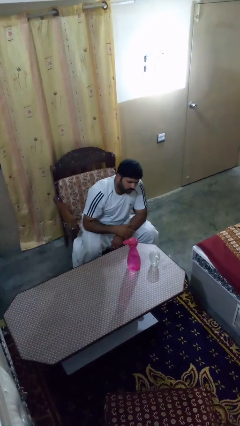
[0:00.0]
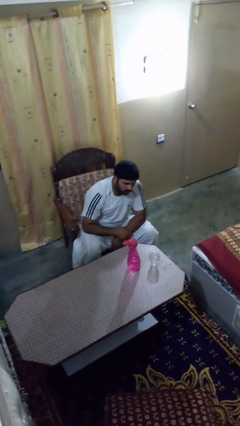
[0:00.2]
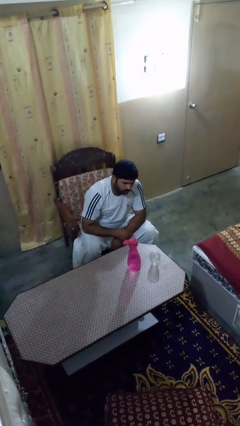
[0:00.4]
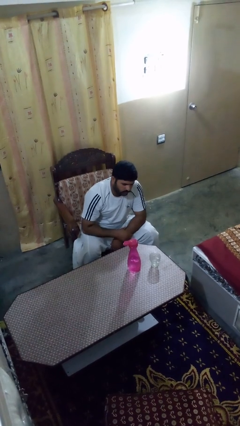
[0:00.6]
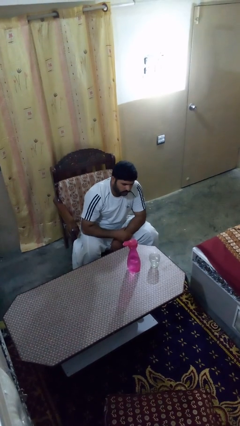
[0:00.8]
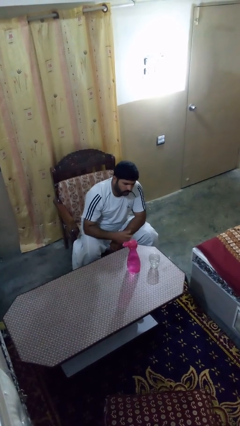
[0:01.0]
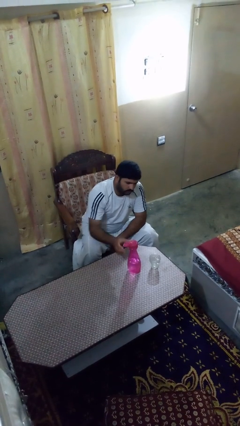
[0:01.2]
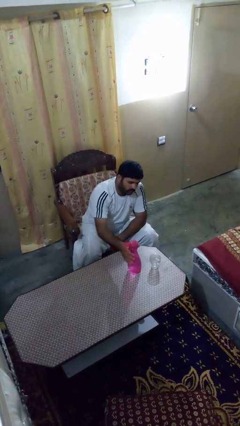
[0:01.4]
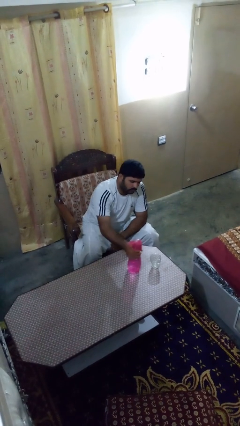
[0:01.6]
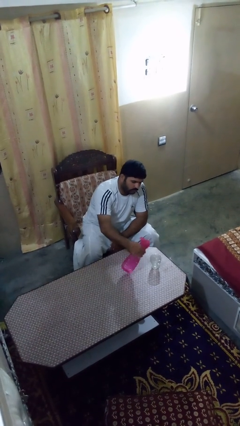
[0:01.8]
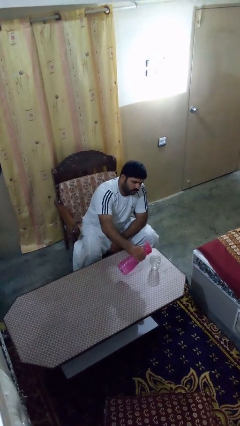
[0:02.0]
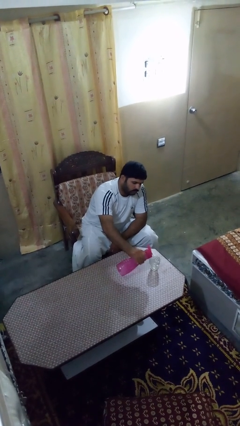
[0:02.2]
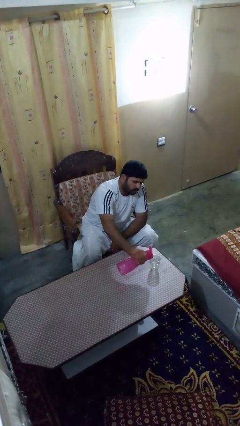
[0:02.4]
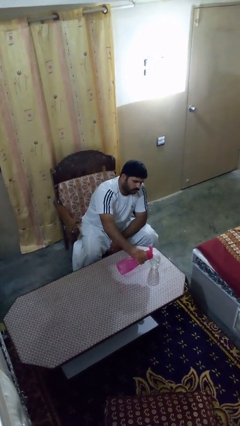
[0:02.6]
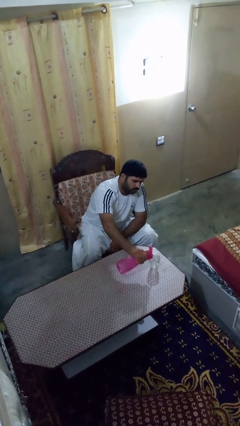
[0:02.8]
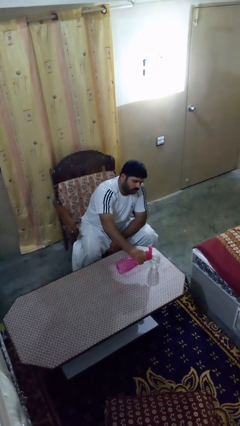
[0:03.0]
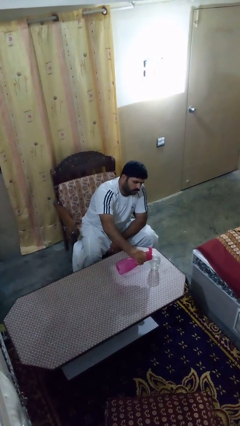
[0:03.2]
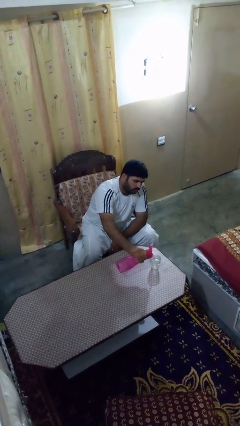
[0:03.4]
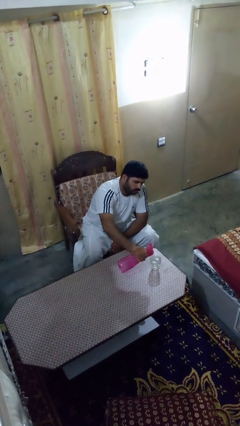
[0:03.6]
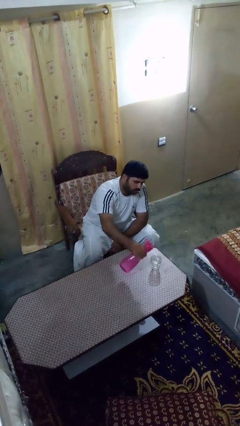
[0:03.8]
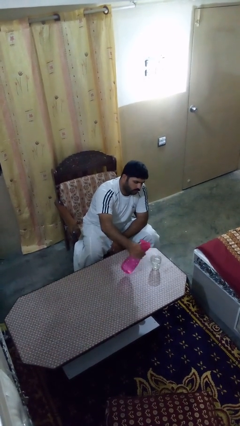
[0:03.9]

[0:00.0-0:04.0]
person pours liquid into cup

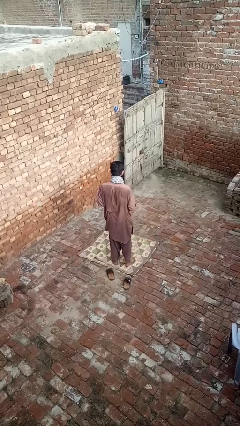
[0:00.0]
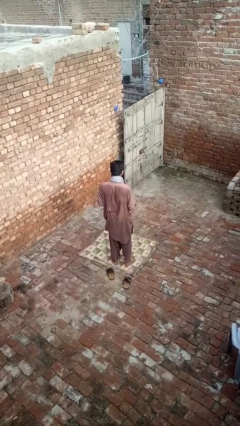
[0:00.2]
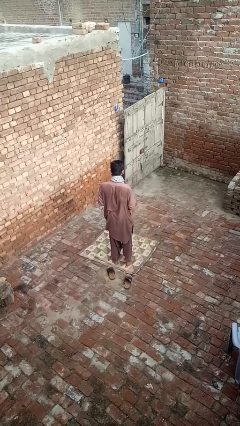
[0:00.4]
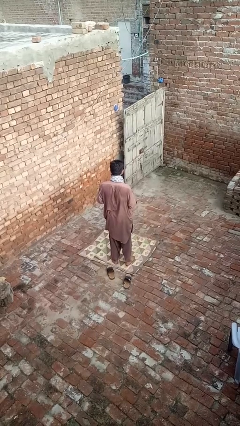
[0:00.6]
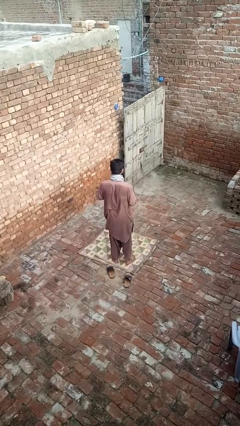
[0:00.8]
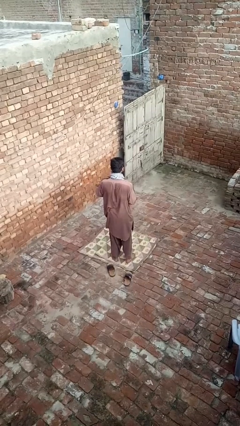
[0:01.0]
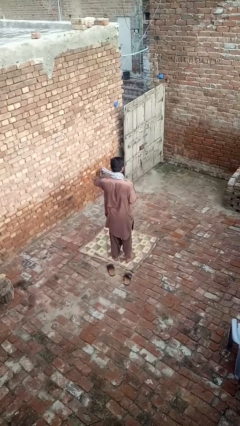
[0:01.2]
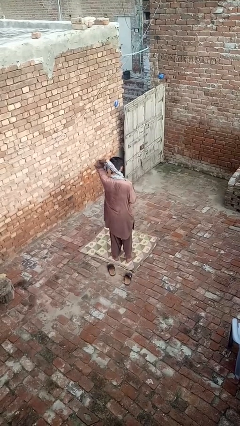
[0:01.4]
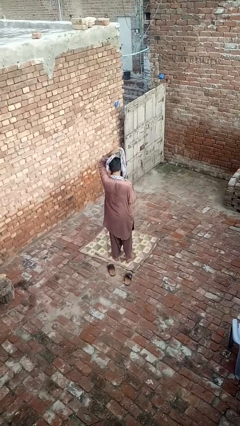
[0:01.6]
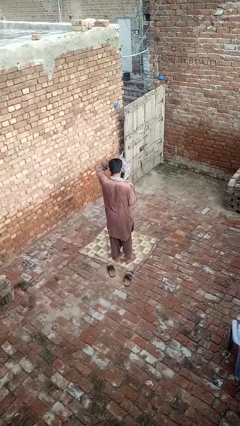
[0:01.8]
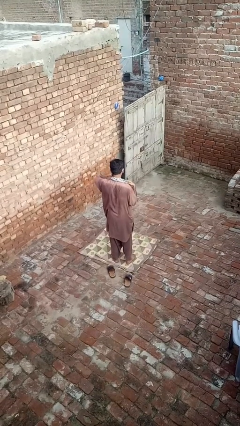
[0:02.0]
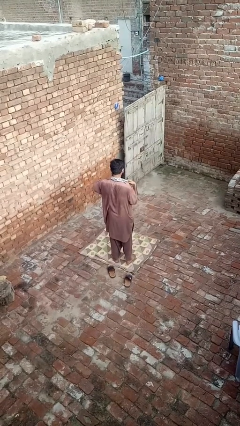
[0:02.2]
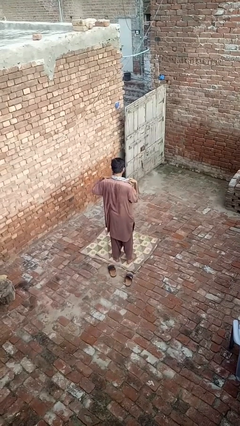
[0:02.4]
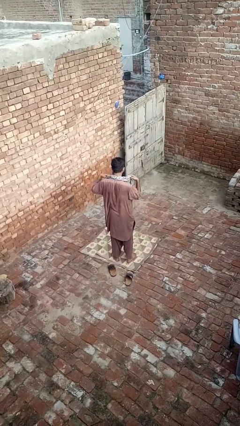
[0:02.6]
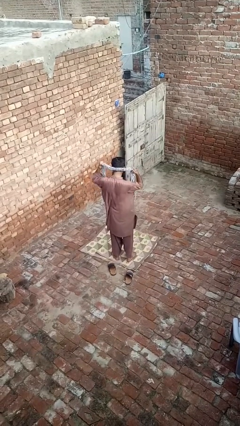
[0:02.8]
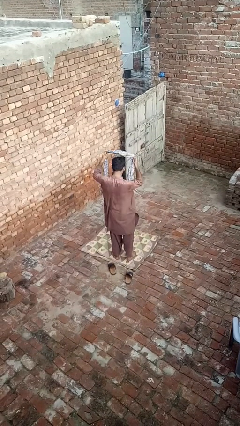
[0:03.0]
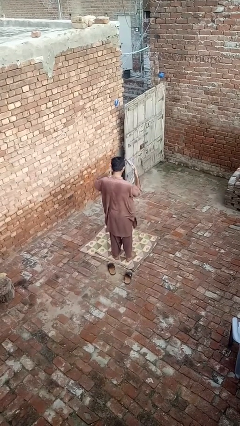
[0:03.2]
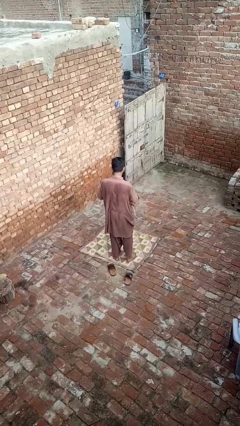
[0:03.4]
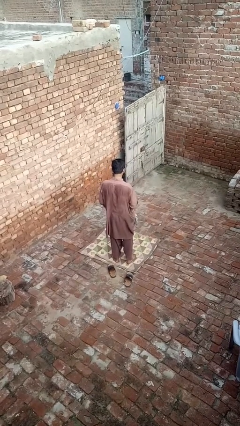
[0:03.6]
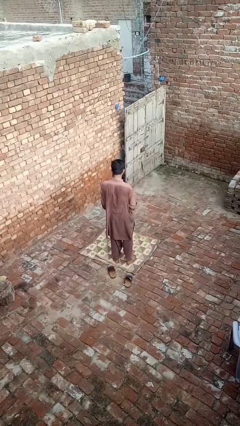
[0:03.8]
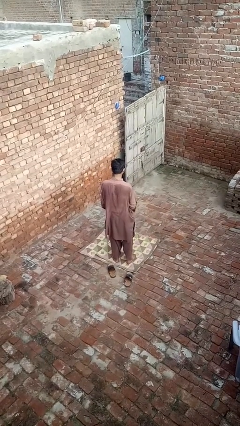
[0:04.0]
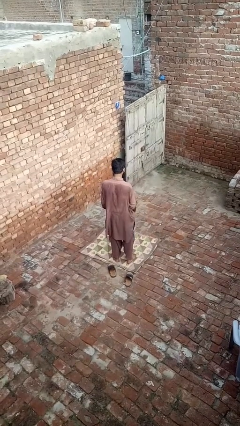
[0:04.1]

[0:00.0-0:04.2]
person takes off scarf

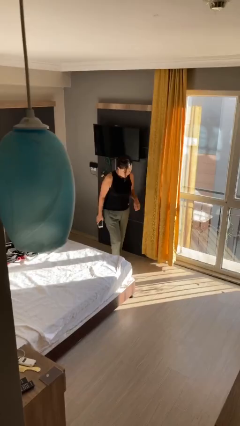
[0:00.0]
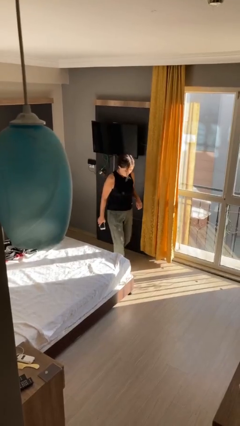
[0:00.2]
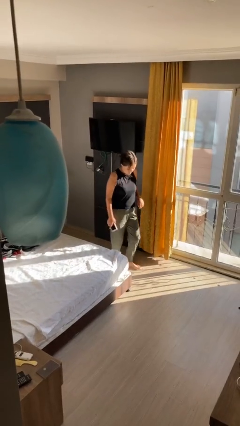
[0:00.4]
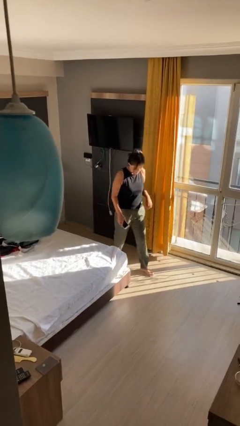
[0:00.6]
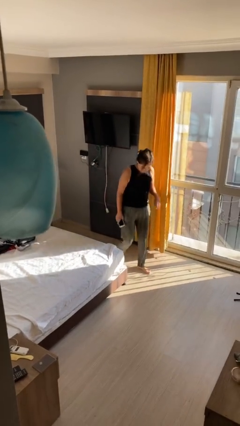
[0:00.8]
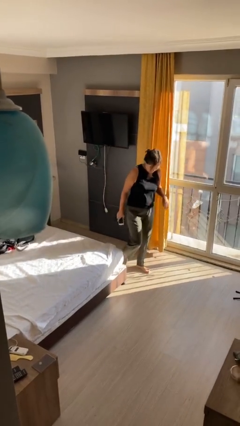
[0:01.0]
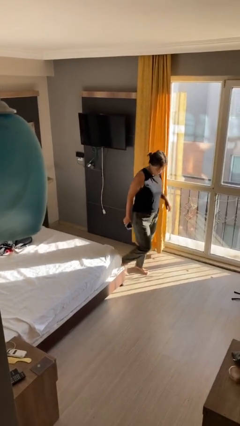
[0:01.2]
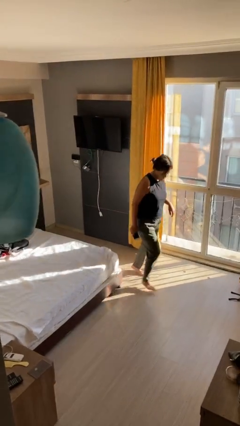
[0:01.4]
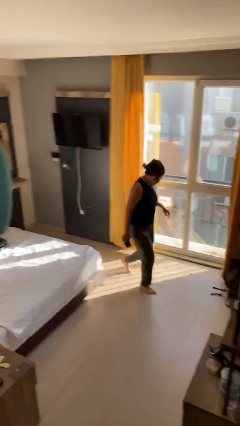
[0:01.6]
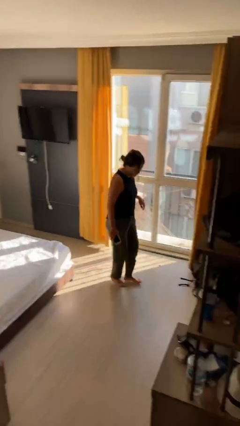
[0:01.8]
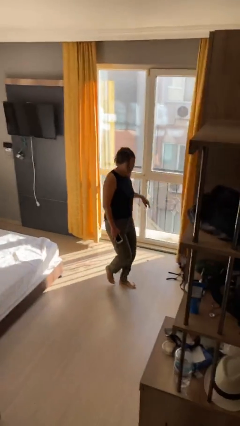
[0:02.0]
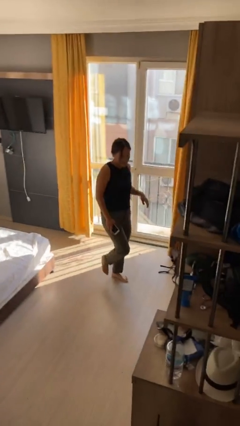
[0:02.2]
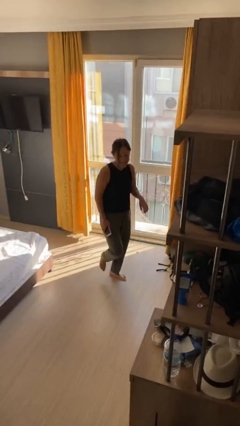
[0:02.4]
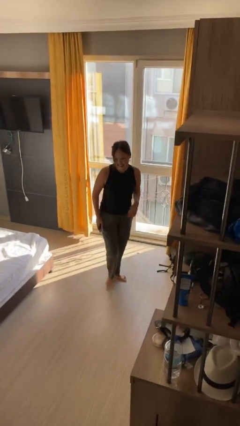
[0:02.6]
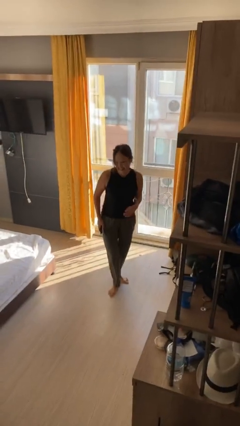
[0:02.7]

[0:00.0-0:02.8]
person stubs toe

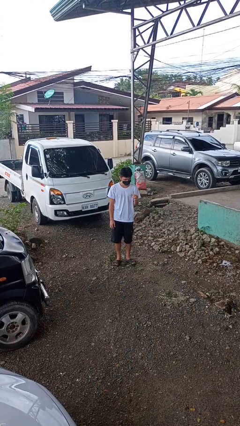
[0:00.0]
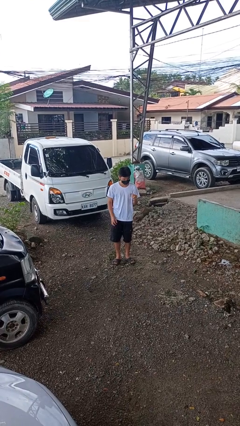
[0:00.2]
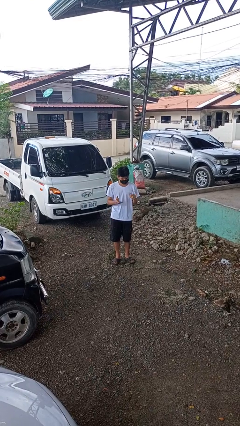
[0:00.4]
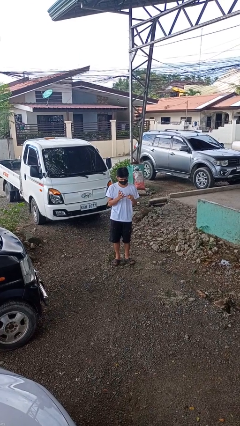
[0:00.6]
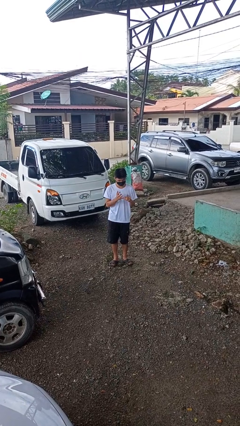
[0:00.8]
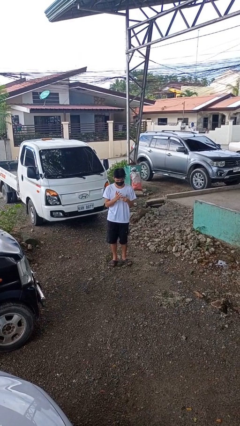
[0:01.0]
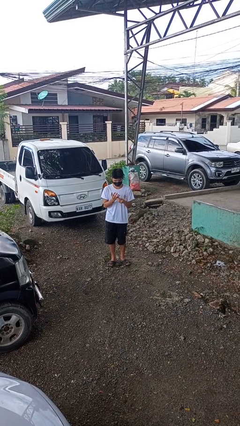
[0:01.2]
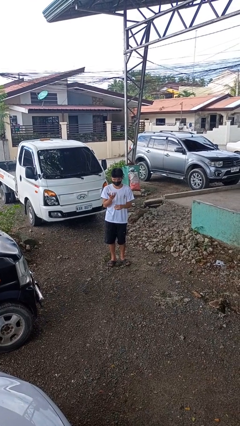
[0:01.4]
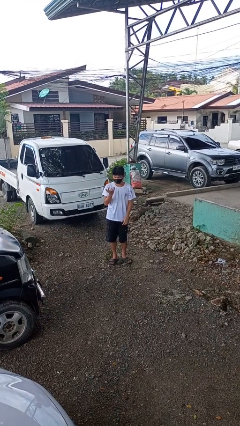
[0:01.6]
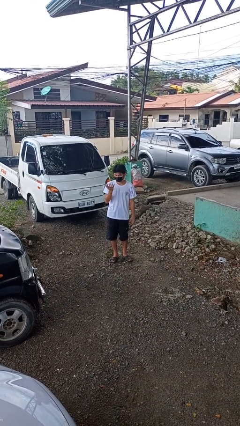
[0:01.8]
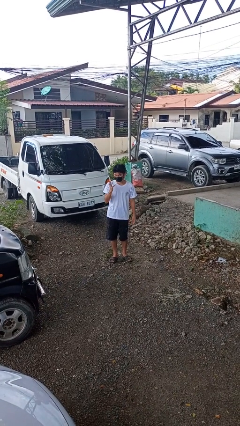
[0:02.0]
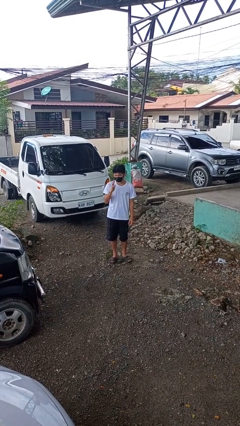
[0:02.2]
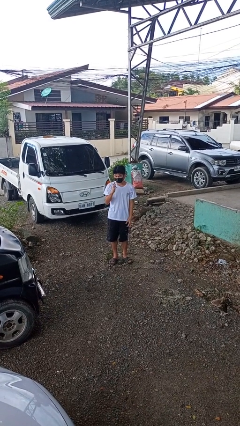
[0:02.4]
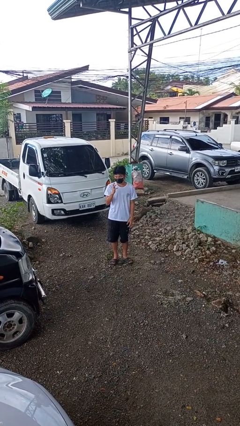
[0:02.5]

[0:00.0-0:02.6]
person puts on ring

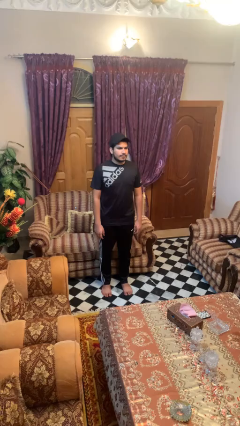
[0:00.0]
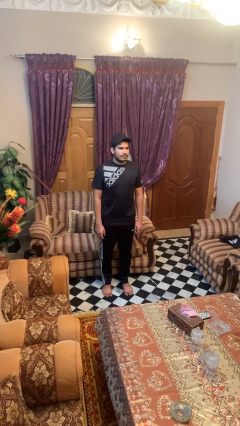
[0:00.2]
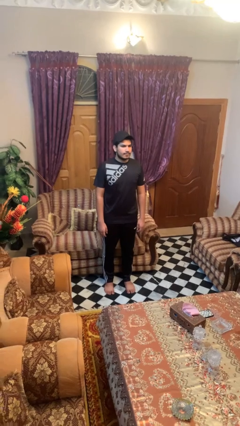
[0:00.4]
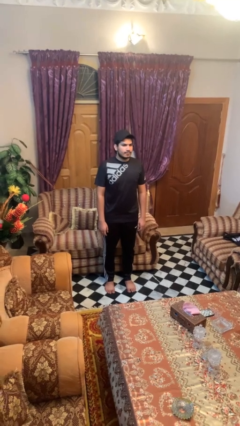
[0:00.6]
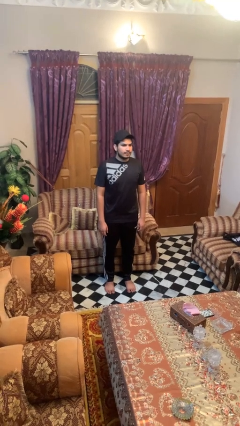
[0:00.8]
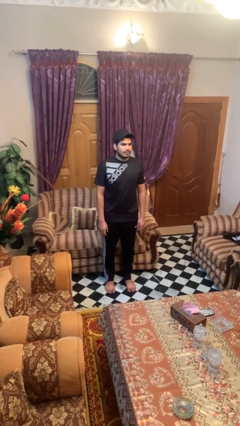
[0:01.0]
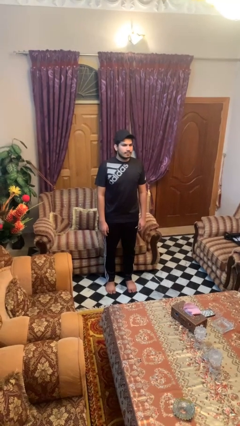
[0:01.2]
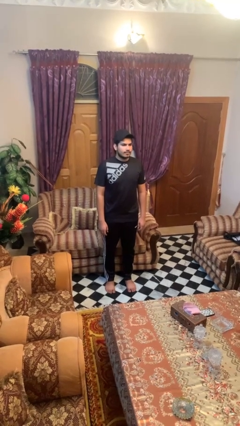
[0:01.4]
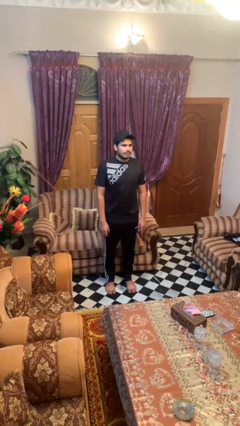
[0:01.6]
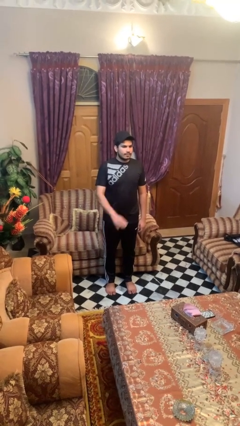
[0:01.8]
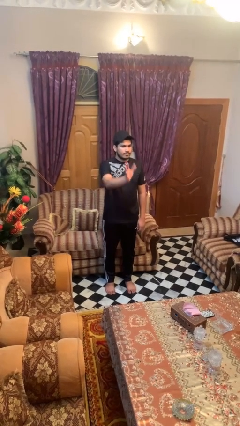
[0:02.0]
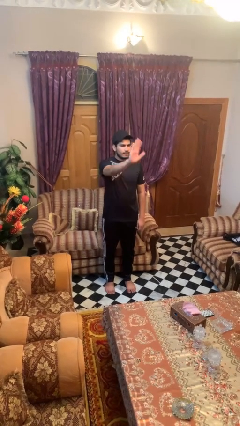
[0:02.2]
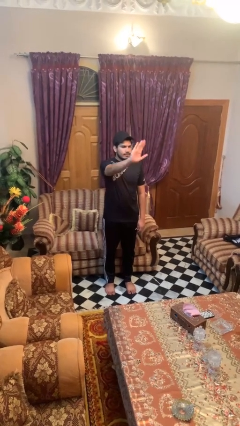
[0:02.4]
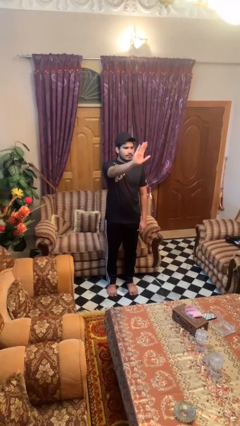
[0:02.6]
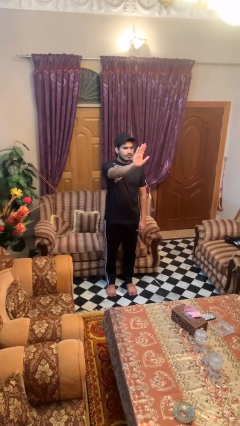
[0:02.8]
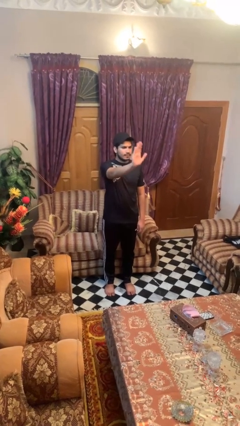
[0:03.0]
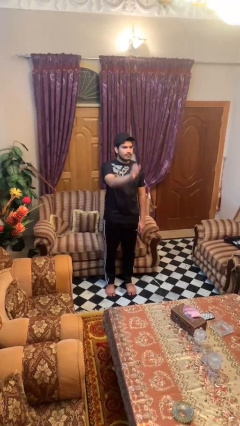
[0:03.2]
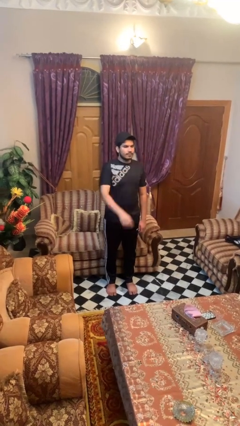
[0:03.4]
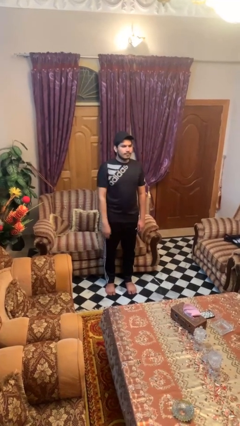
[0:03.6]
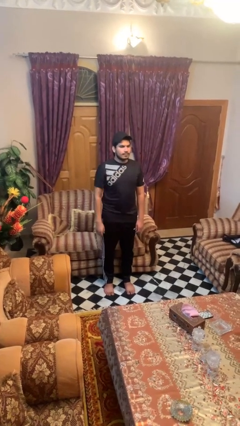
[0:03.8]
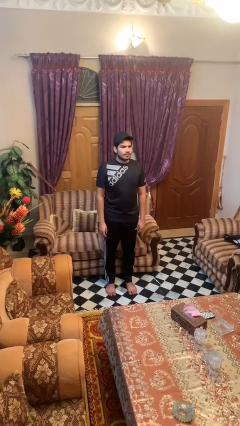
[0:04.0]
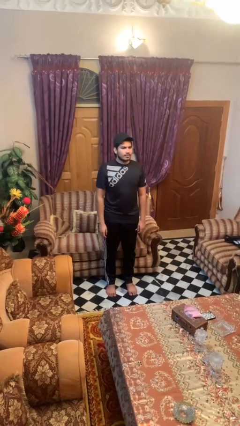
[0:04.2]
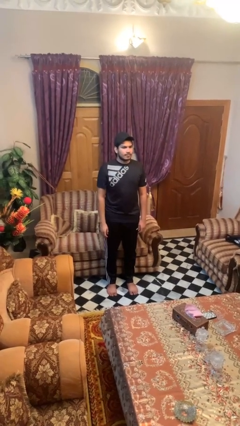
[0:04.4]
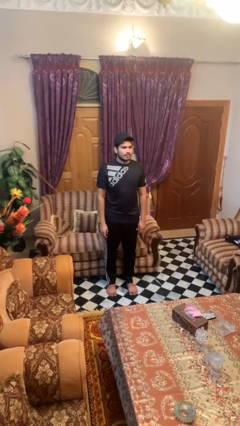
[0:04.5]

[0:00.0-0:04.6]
person waves at person
